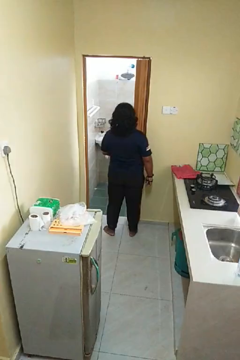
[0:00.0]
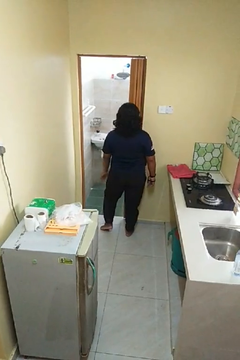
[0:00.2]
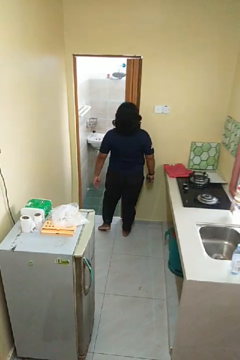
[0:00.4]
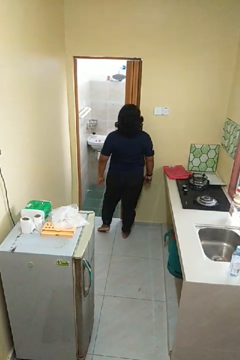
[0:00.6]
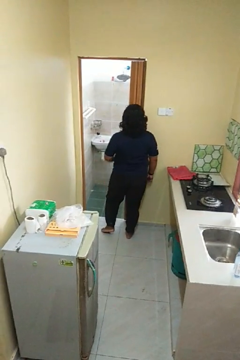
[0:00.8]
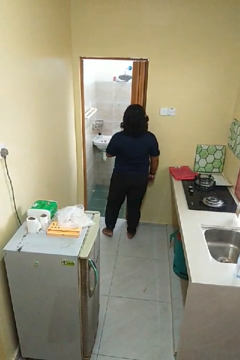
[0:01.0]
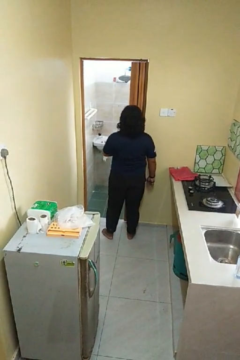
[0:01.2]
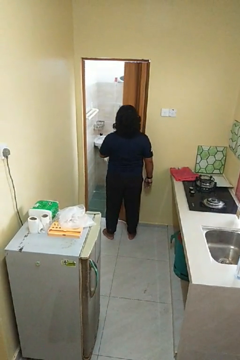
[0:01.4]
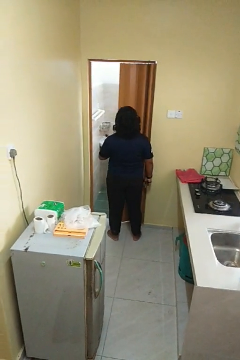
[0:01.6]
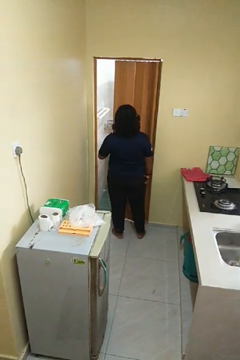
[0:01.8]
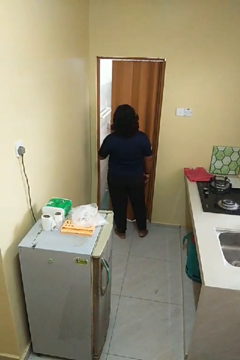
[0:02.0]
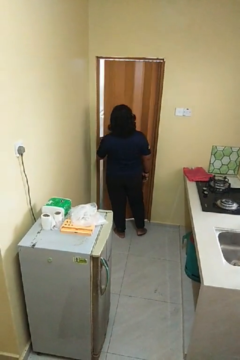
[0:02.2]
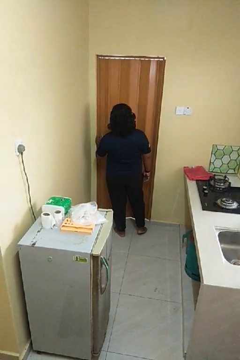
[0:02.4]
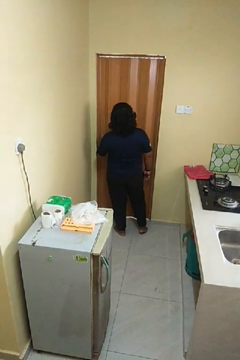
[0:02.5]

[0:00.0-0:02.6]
person closes sliding door

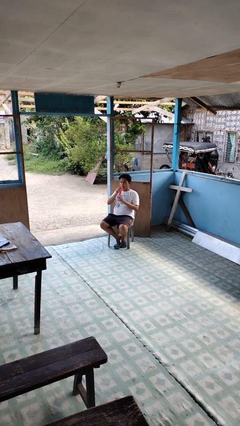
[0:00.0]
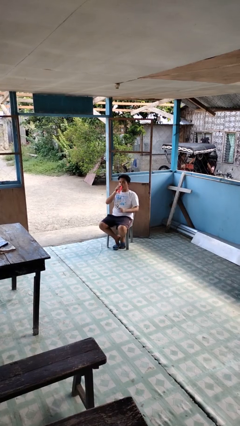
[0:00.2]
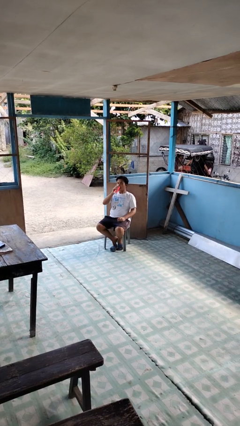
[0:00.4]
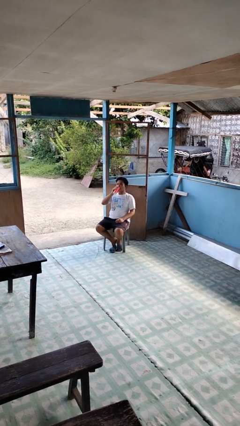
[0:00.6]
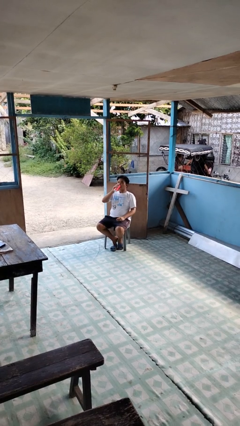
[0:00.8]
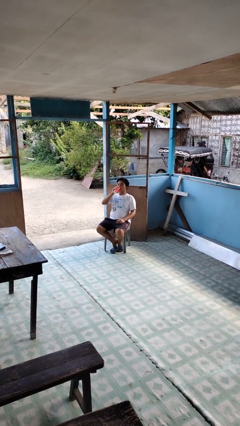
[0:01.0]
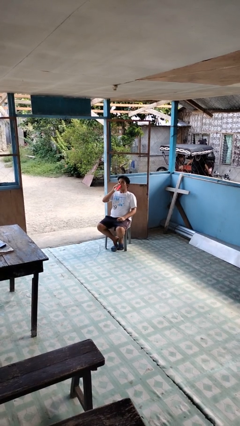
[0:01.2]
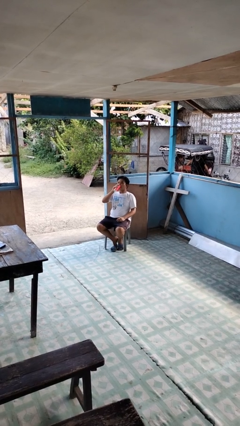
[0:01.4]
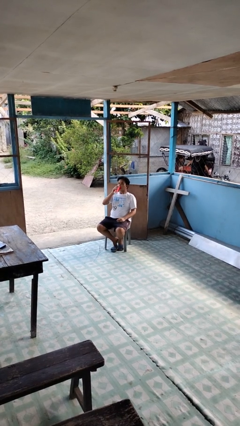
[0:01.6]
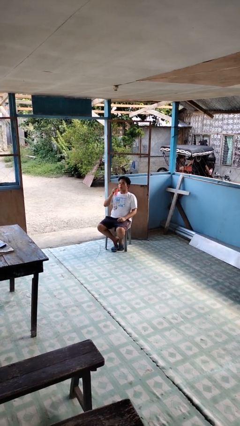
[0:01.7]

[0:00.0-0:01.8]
person drinks from beverage can

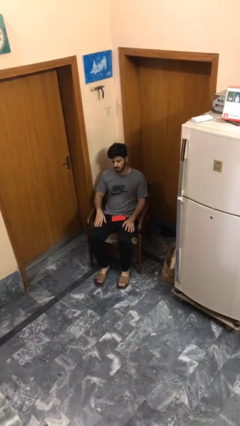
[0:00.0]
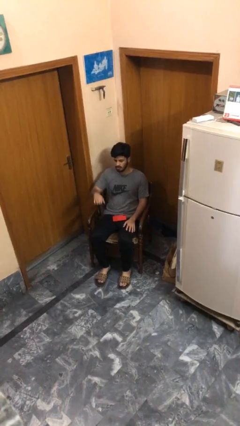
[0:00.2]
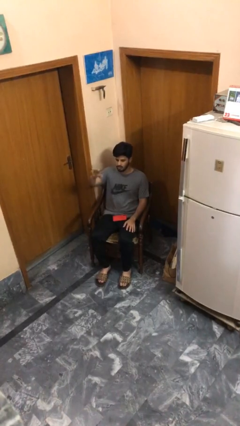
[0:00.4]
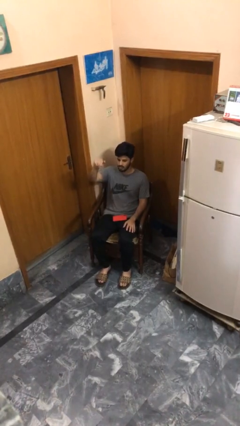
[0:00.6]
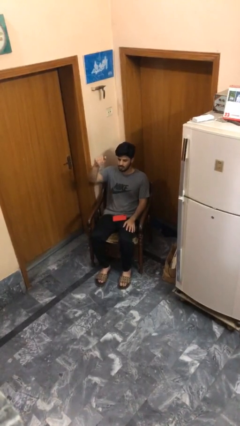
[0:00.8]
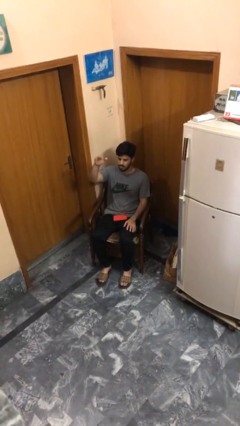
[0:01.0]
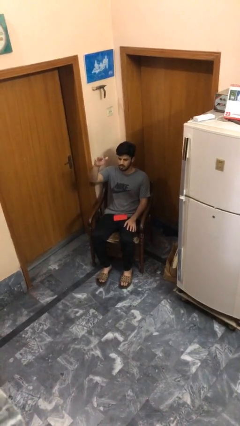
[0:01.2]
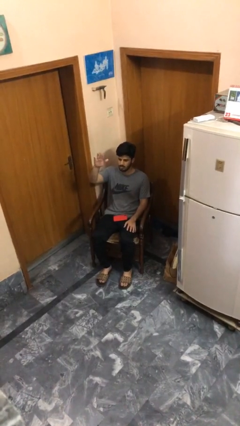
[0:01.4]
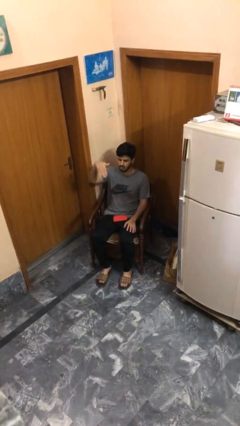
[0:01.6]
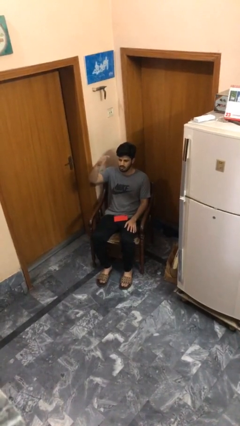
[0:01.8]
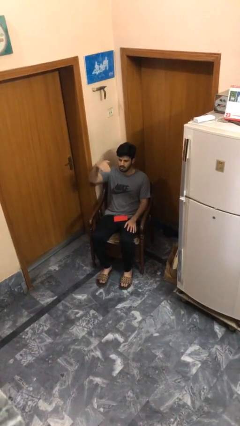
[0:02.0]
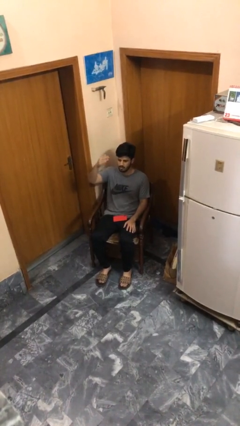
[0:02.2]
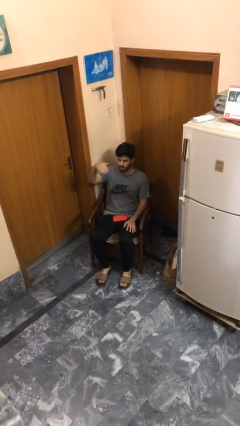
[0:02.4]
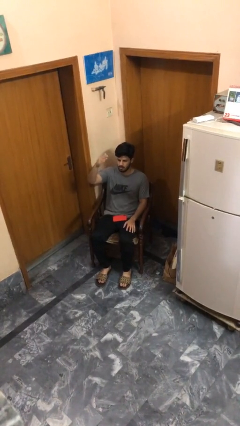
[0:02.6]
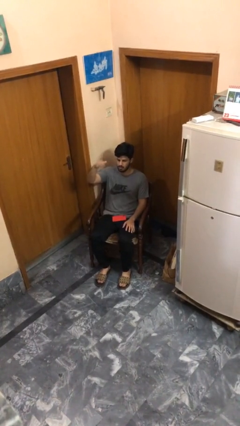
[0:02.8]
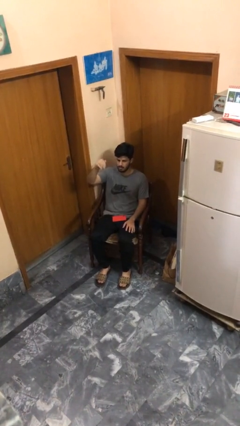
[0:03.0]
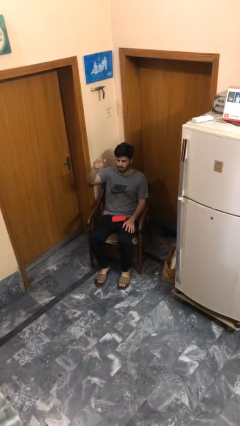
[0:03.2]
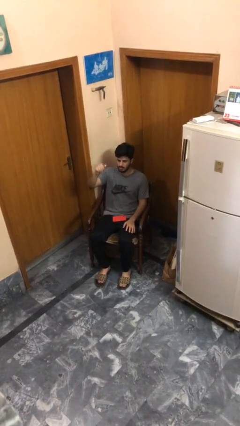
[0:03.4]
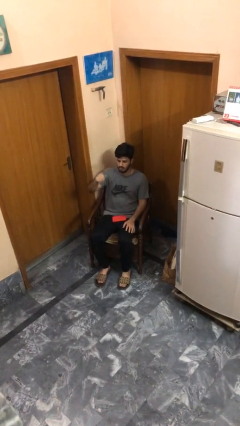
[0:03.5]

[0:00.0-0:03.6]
person gestures come here

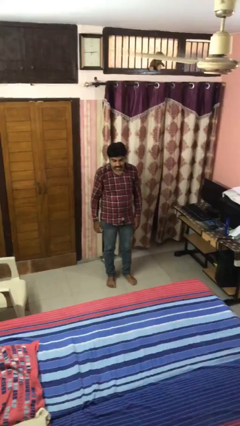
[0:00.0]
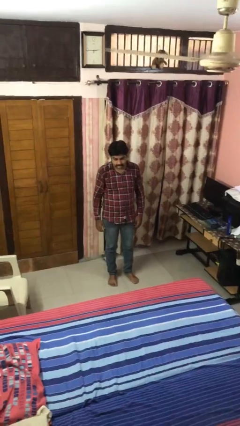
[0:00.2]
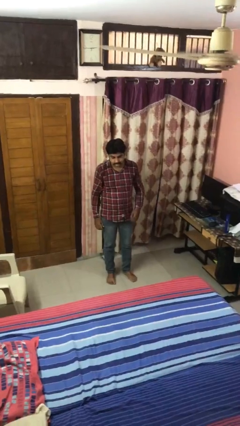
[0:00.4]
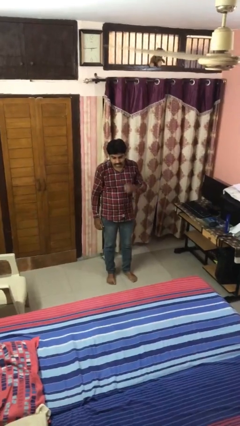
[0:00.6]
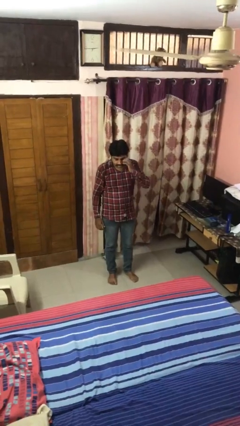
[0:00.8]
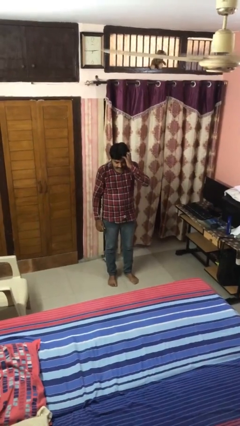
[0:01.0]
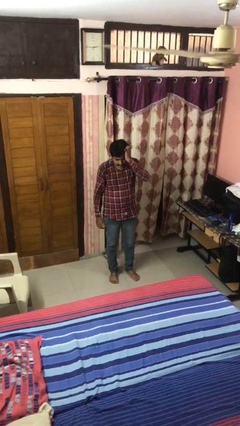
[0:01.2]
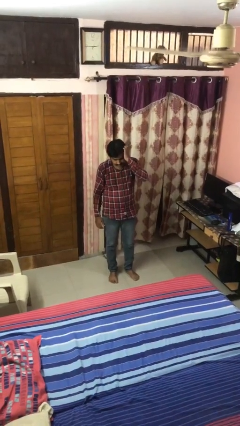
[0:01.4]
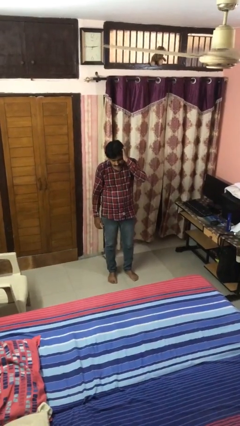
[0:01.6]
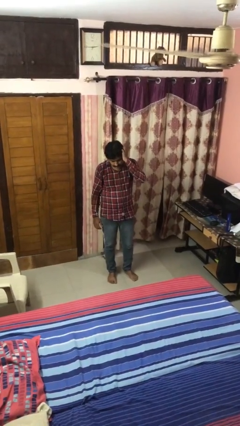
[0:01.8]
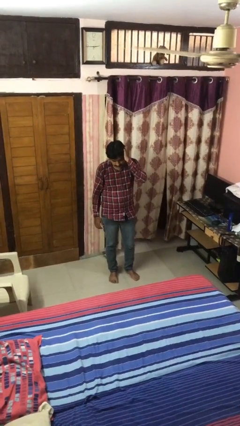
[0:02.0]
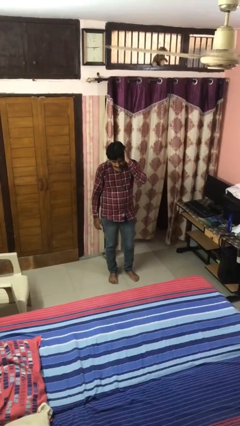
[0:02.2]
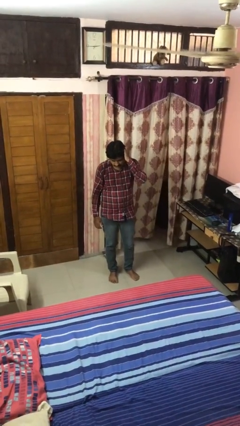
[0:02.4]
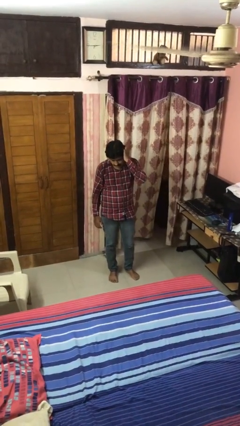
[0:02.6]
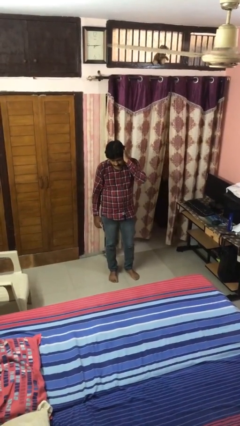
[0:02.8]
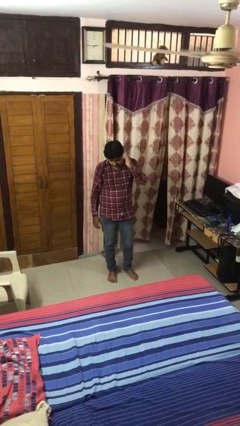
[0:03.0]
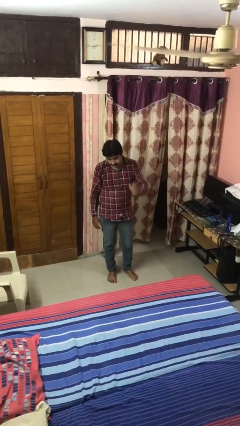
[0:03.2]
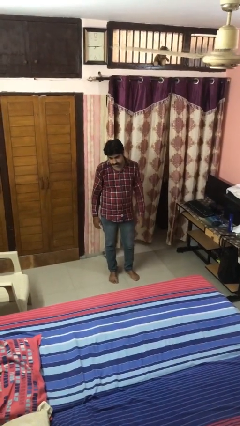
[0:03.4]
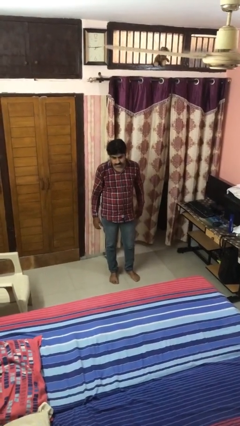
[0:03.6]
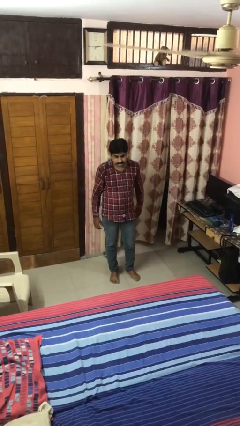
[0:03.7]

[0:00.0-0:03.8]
person scratches face

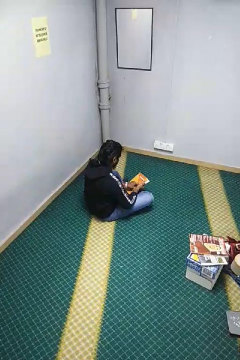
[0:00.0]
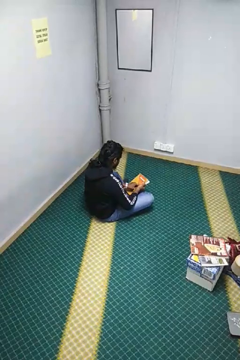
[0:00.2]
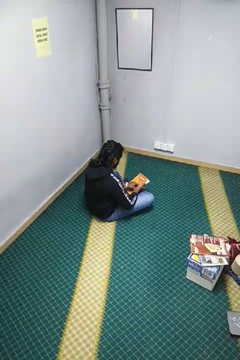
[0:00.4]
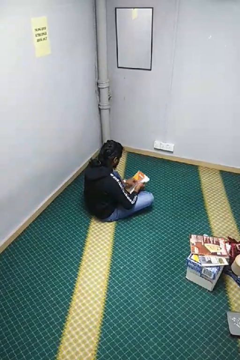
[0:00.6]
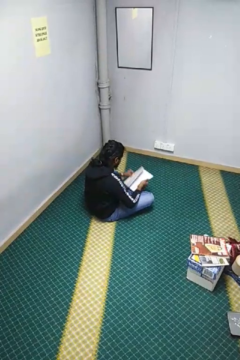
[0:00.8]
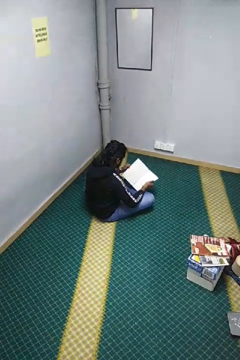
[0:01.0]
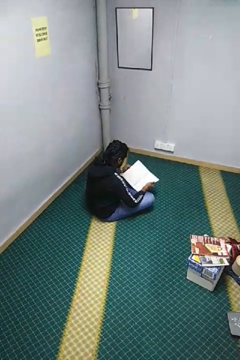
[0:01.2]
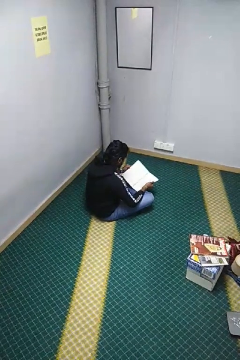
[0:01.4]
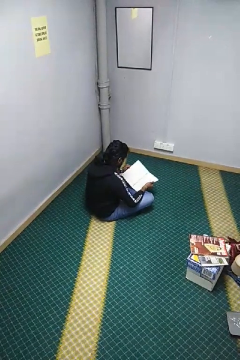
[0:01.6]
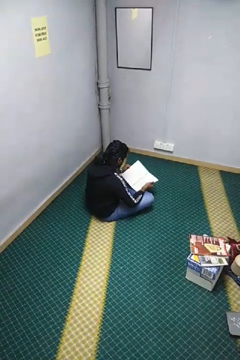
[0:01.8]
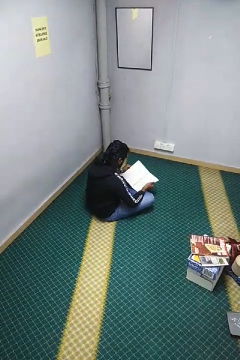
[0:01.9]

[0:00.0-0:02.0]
person reads book

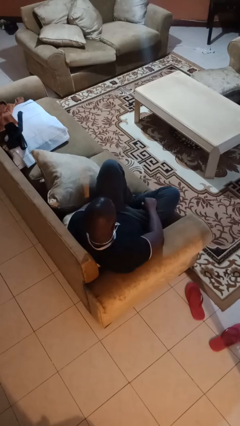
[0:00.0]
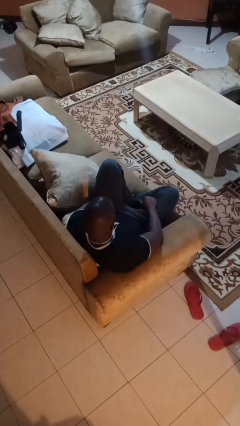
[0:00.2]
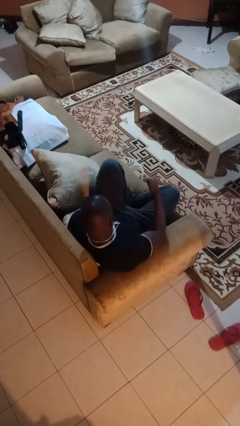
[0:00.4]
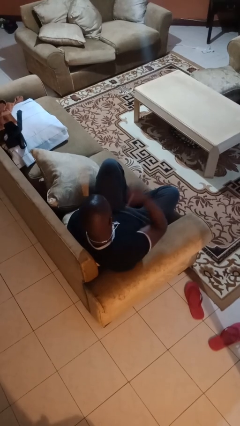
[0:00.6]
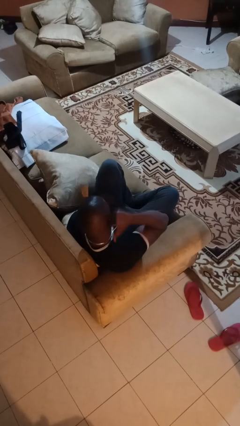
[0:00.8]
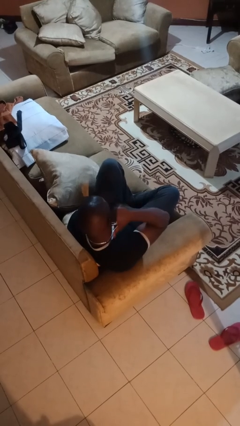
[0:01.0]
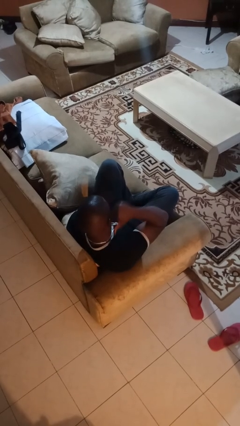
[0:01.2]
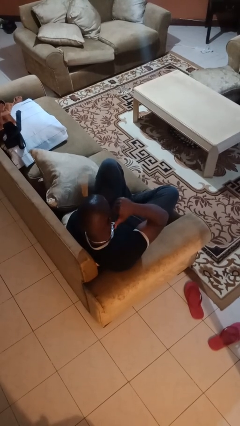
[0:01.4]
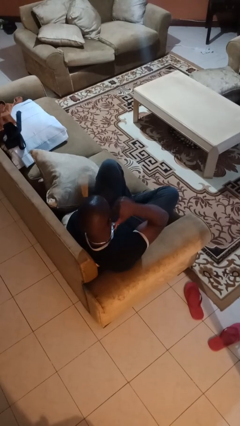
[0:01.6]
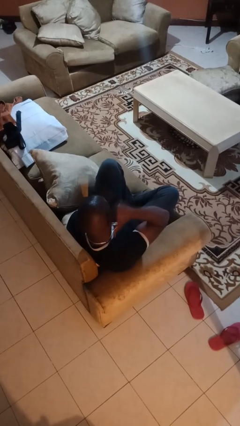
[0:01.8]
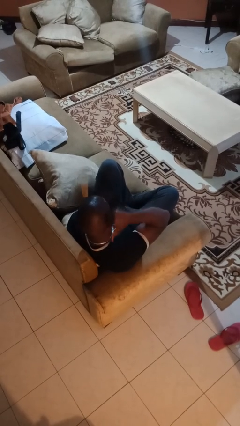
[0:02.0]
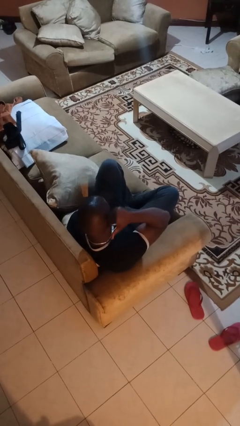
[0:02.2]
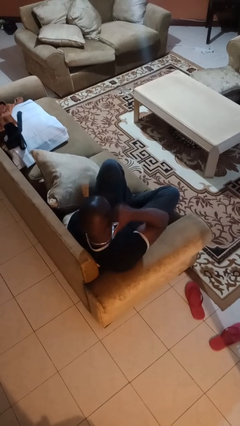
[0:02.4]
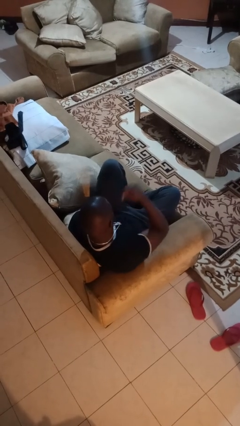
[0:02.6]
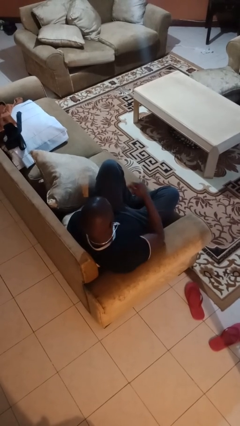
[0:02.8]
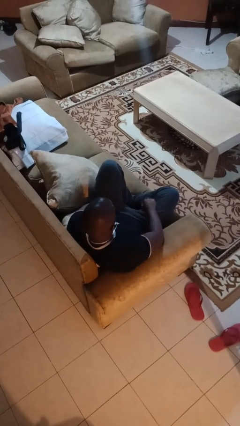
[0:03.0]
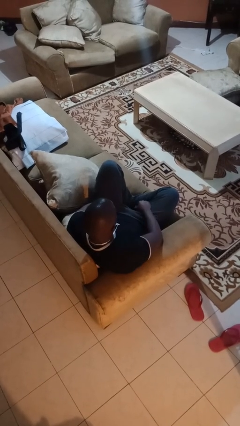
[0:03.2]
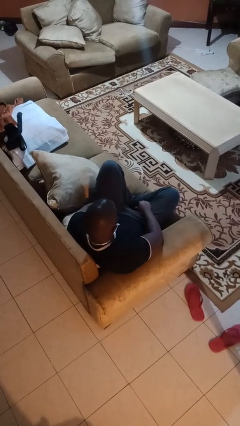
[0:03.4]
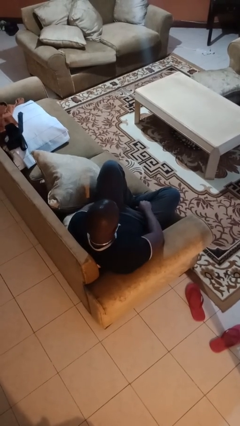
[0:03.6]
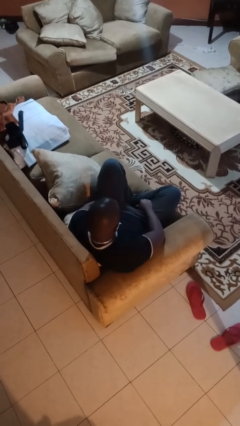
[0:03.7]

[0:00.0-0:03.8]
person gestures behind me

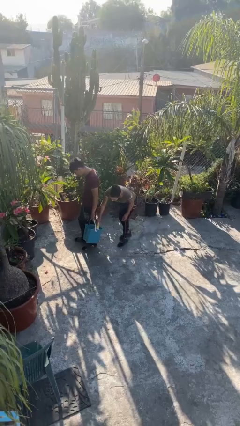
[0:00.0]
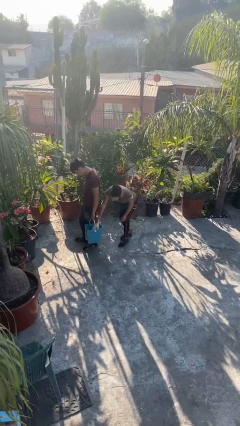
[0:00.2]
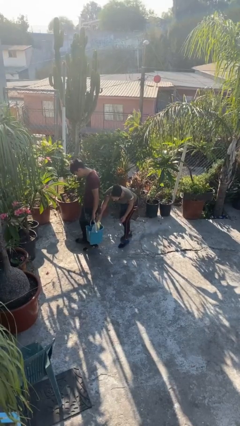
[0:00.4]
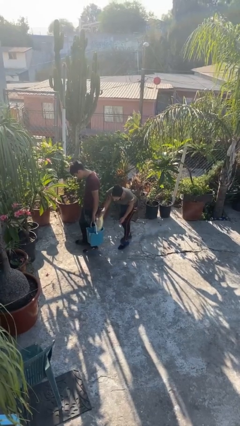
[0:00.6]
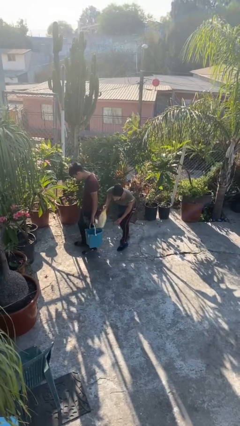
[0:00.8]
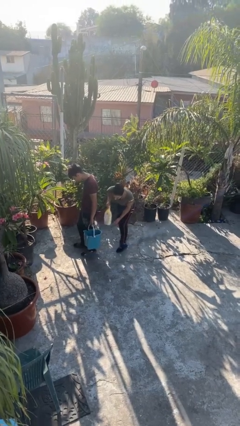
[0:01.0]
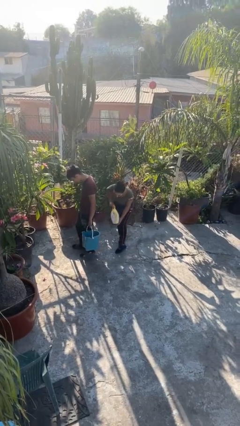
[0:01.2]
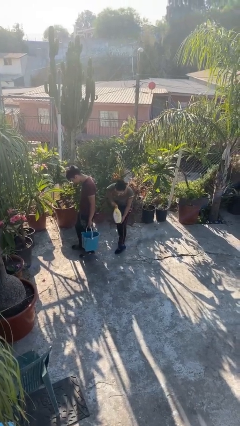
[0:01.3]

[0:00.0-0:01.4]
person steals object from person
